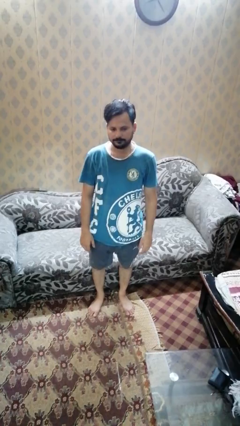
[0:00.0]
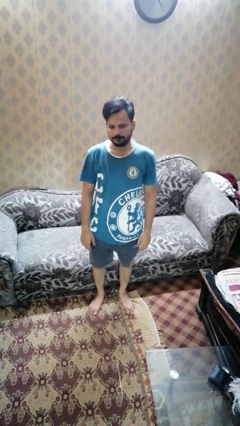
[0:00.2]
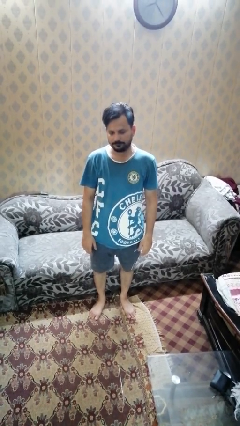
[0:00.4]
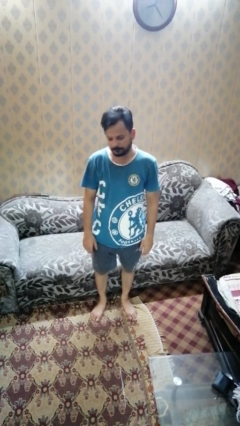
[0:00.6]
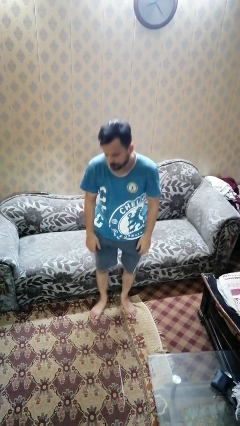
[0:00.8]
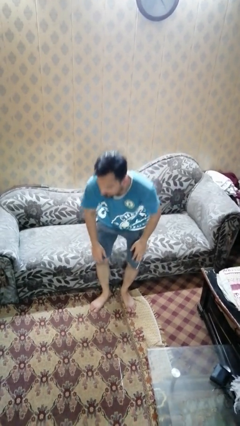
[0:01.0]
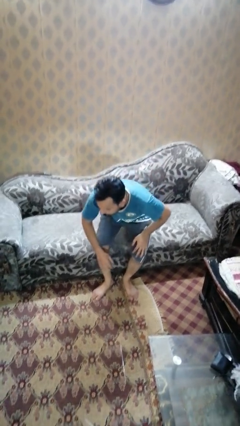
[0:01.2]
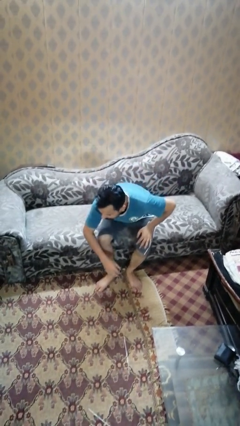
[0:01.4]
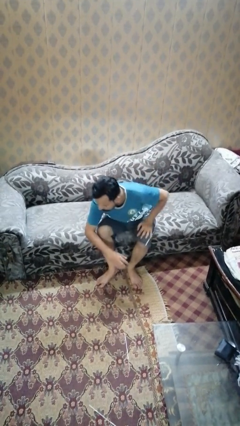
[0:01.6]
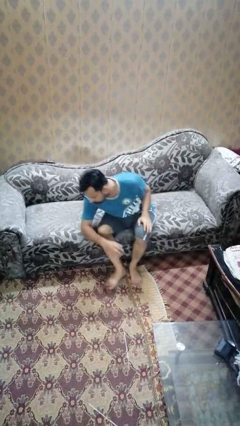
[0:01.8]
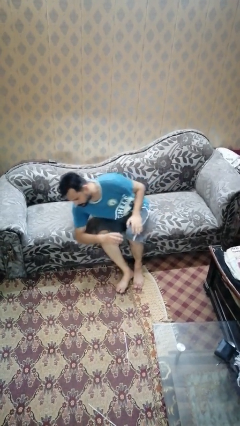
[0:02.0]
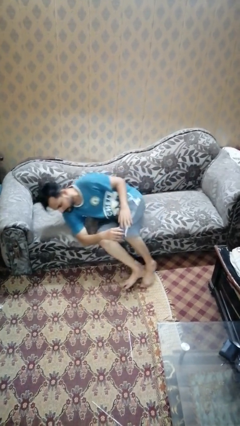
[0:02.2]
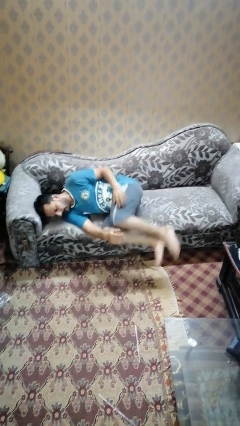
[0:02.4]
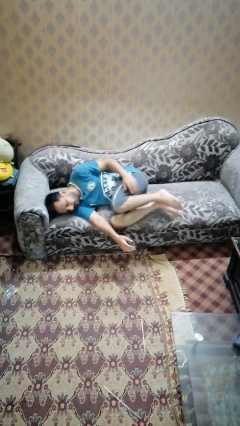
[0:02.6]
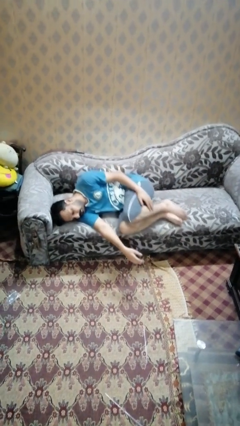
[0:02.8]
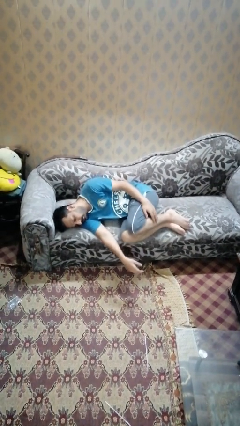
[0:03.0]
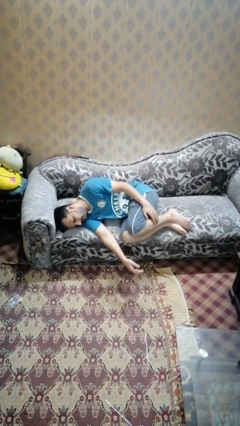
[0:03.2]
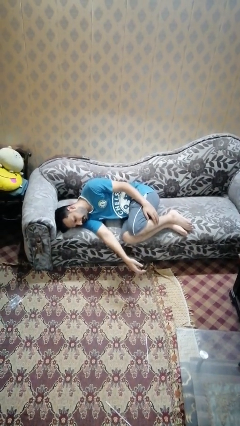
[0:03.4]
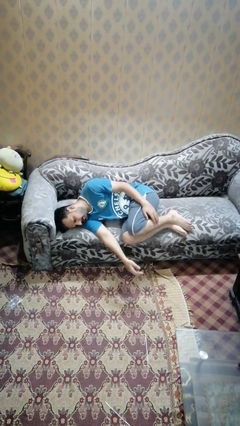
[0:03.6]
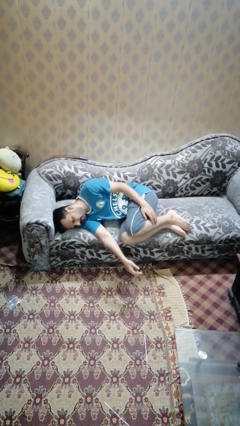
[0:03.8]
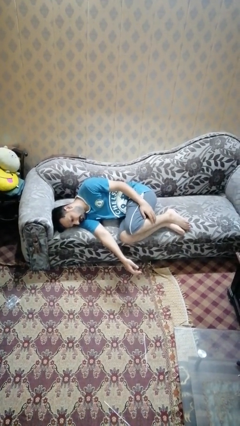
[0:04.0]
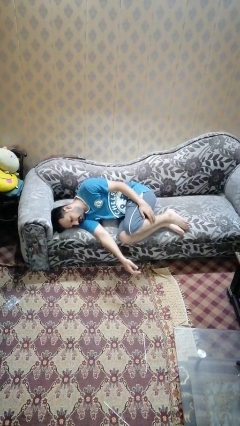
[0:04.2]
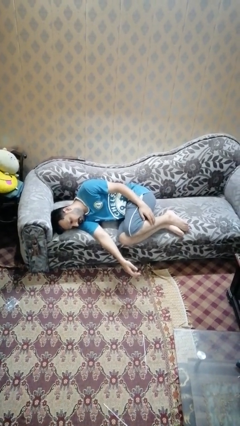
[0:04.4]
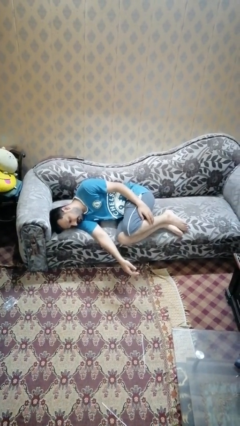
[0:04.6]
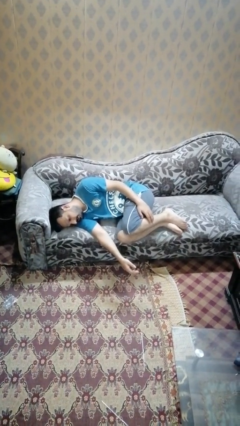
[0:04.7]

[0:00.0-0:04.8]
person lies down on couch

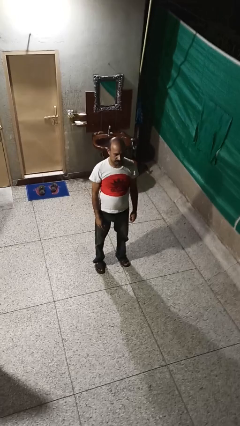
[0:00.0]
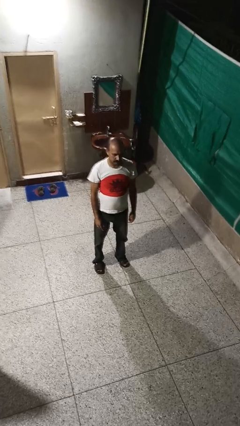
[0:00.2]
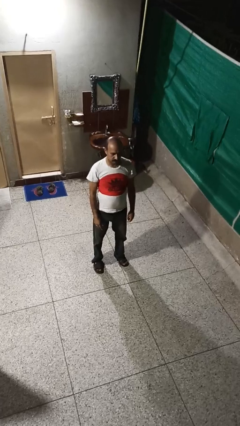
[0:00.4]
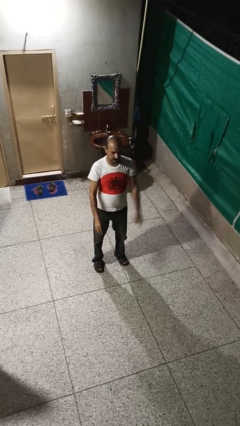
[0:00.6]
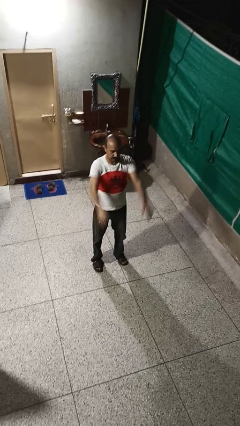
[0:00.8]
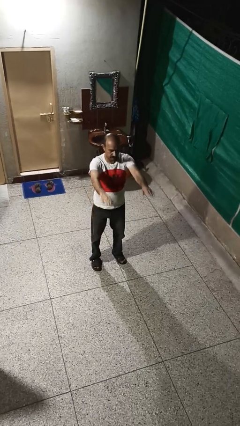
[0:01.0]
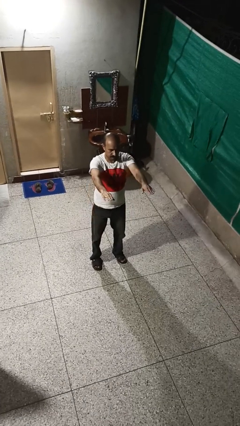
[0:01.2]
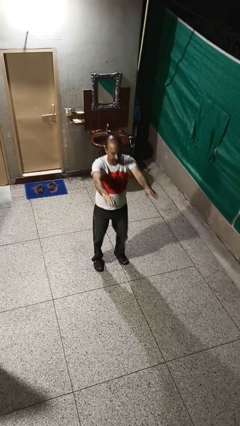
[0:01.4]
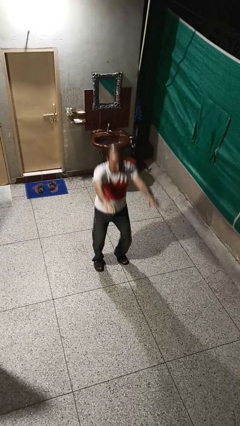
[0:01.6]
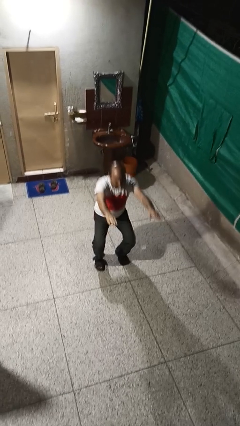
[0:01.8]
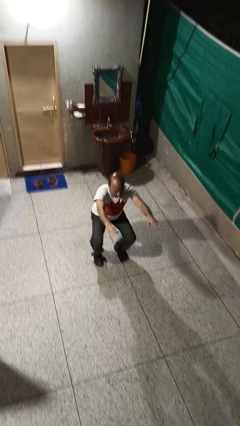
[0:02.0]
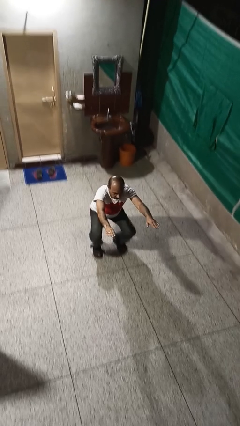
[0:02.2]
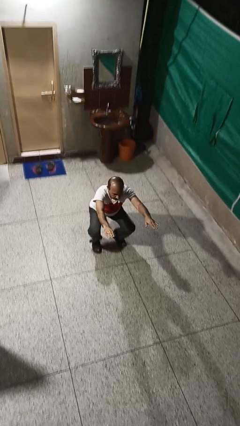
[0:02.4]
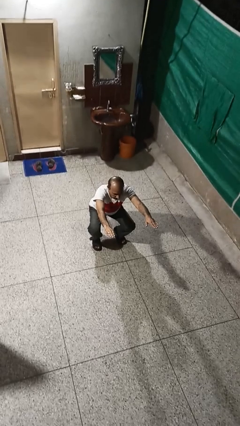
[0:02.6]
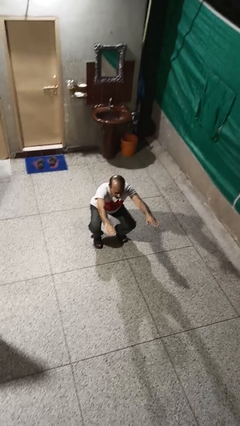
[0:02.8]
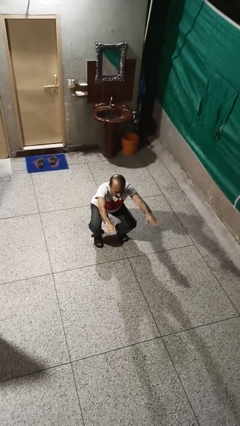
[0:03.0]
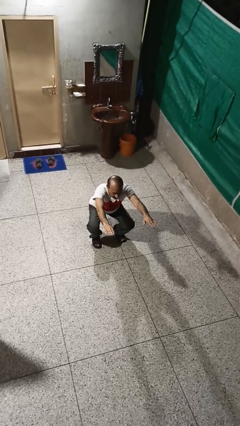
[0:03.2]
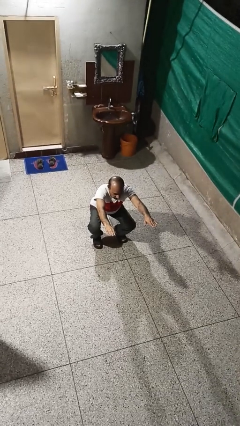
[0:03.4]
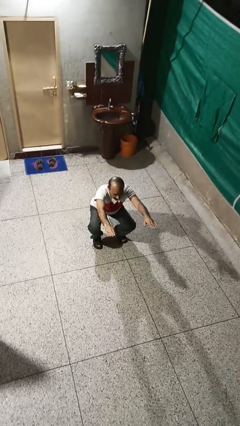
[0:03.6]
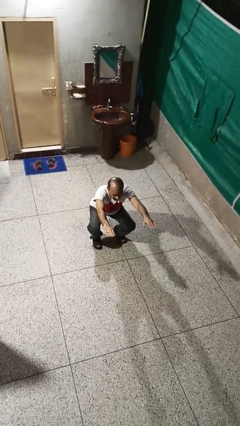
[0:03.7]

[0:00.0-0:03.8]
person squats

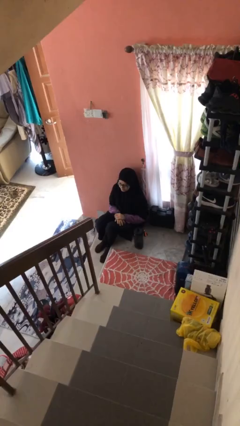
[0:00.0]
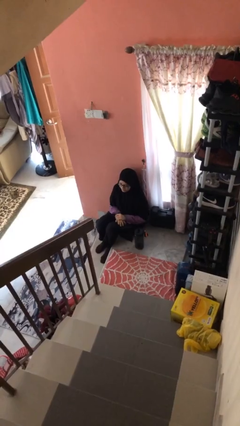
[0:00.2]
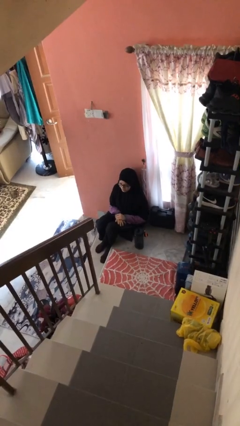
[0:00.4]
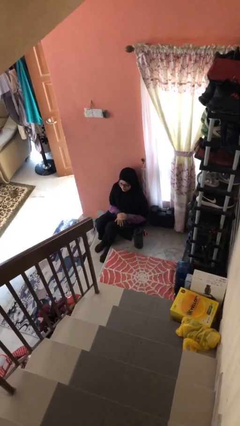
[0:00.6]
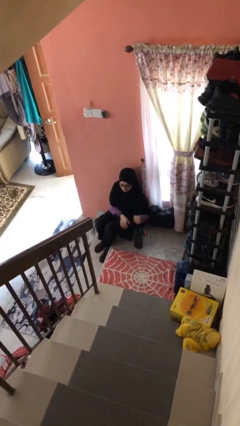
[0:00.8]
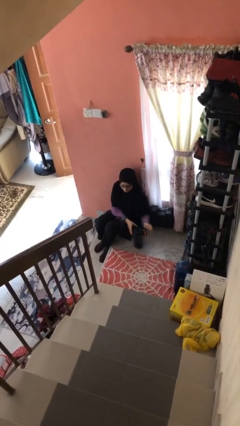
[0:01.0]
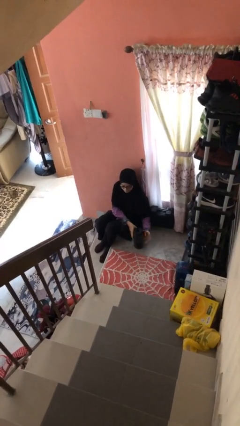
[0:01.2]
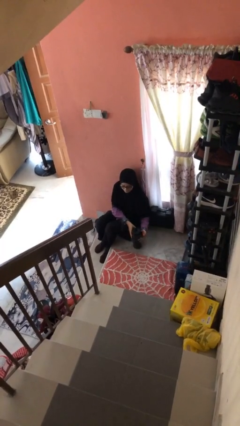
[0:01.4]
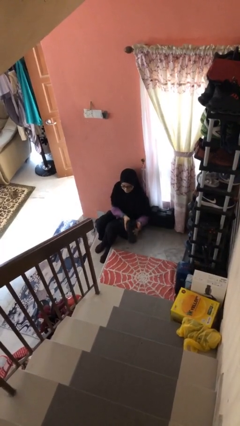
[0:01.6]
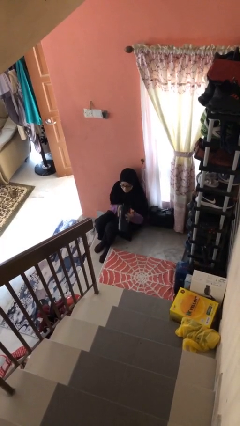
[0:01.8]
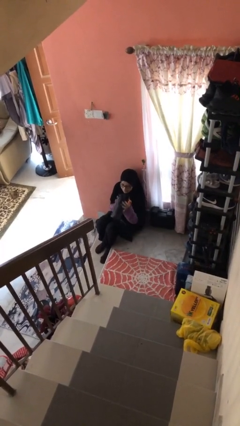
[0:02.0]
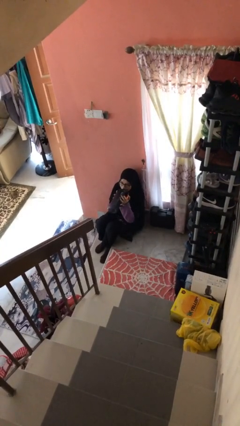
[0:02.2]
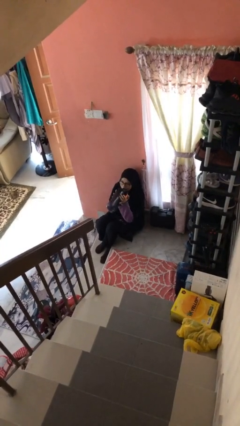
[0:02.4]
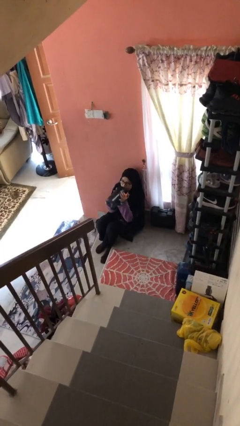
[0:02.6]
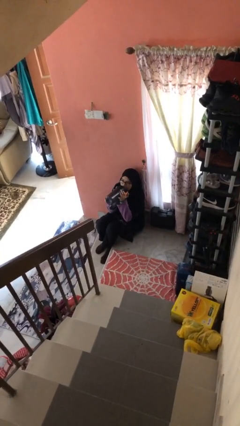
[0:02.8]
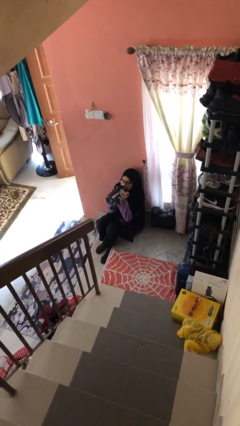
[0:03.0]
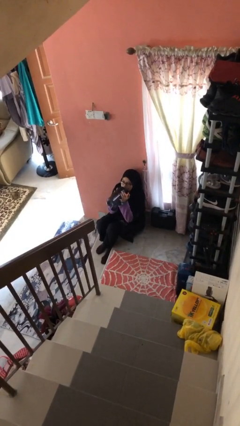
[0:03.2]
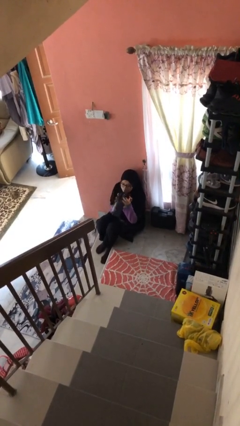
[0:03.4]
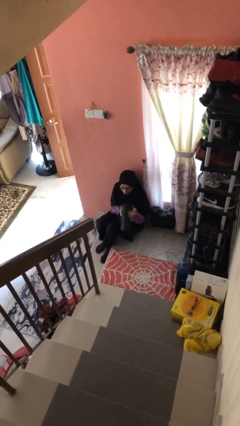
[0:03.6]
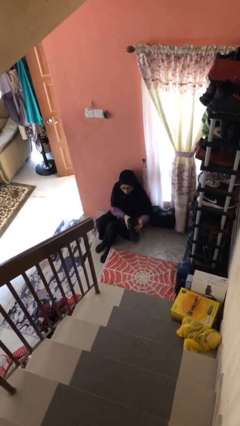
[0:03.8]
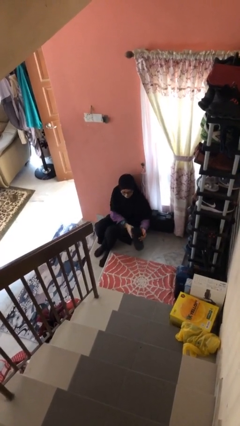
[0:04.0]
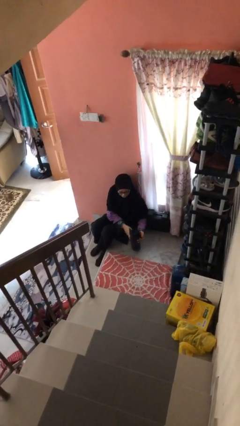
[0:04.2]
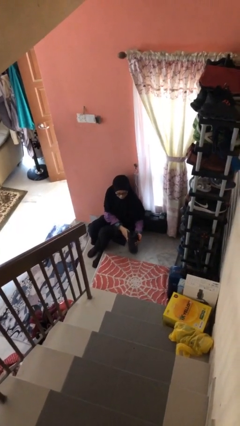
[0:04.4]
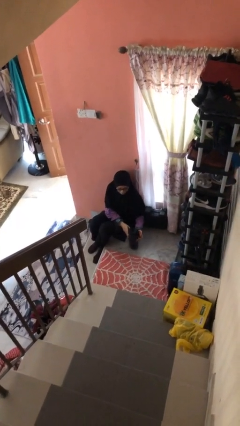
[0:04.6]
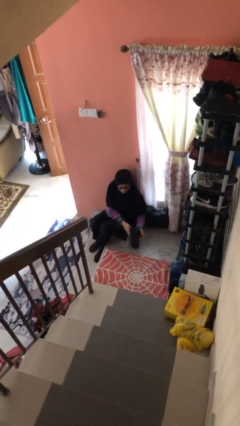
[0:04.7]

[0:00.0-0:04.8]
person drinks from bottle

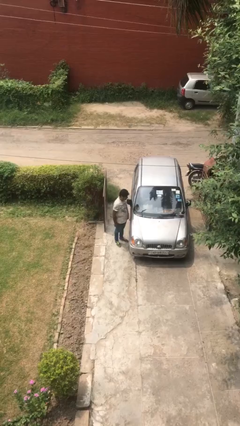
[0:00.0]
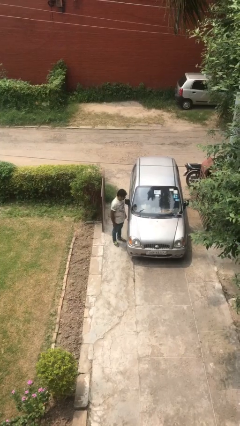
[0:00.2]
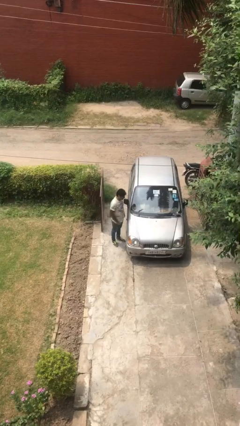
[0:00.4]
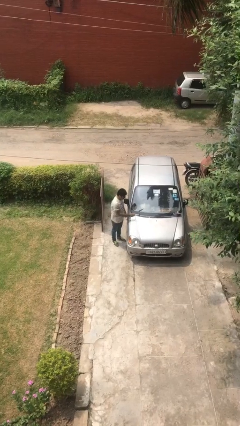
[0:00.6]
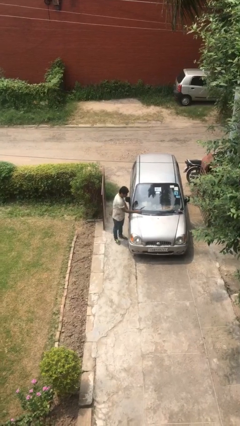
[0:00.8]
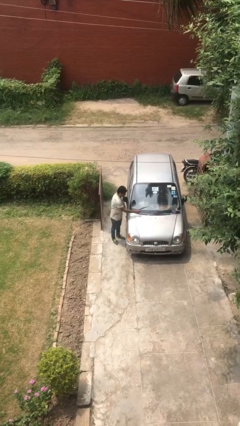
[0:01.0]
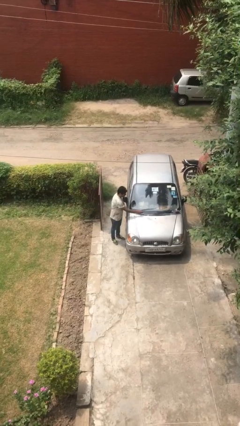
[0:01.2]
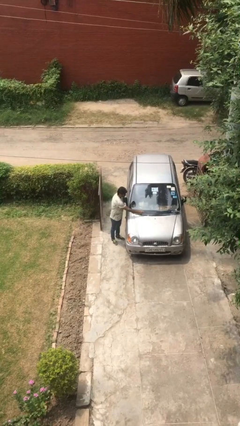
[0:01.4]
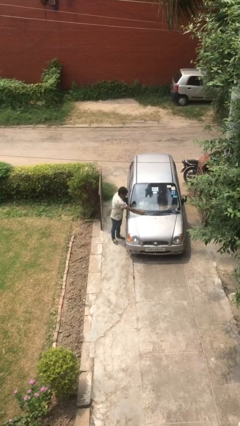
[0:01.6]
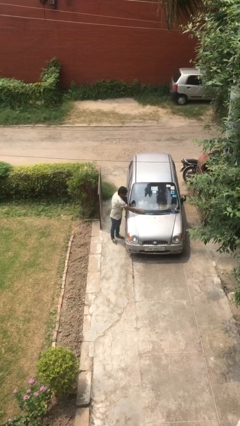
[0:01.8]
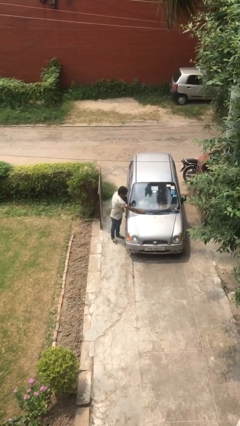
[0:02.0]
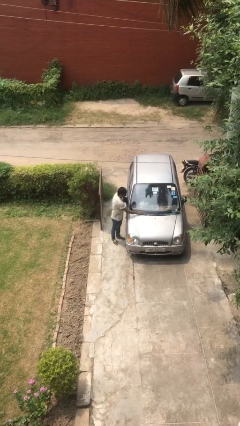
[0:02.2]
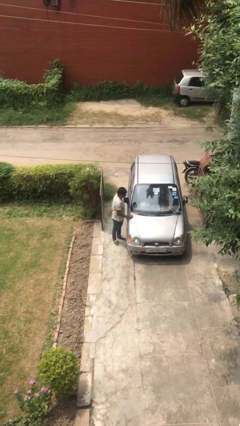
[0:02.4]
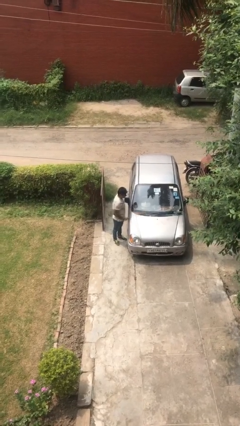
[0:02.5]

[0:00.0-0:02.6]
person flips down car wipers

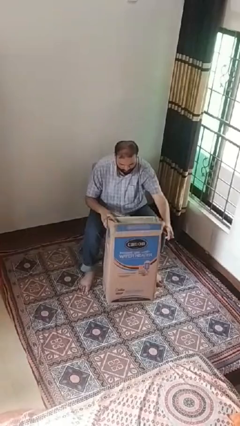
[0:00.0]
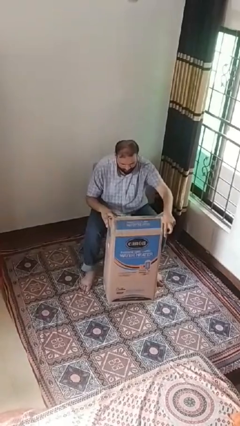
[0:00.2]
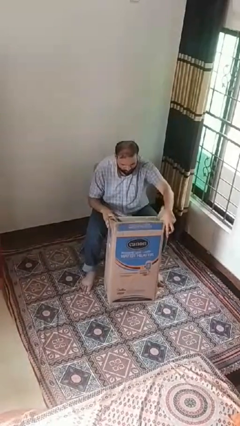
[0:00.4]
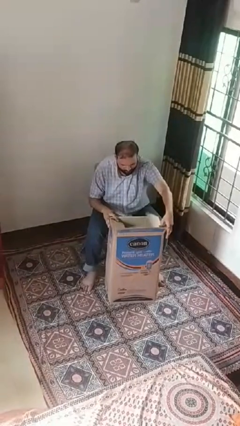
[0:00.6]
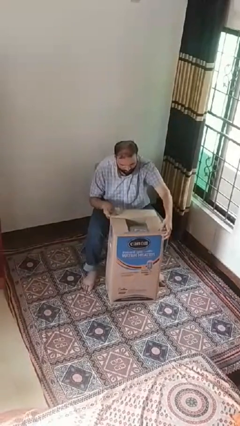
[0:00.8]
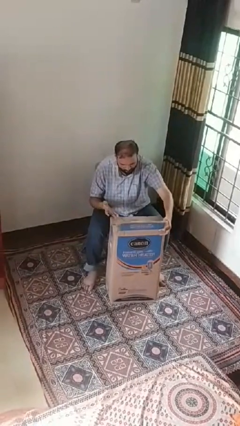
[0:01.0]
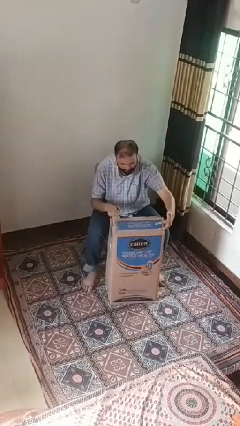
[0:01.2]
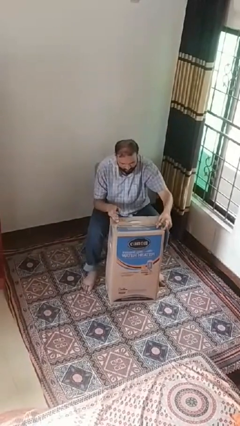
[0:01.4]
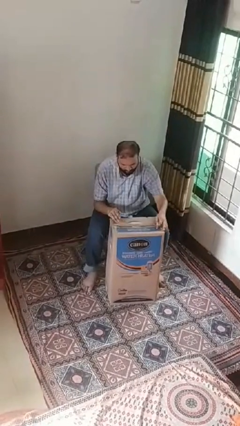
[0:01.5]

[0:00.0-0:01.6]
person closes box
